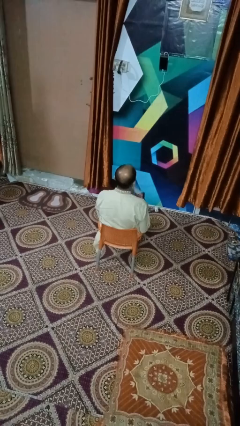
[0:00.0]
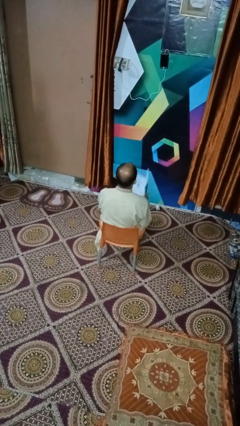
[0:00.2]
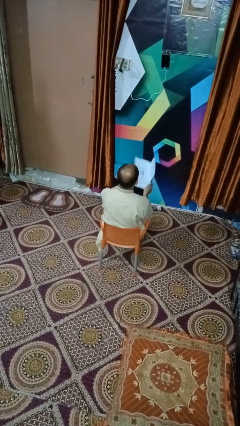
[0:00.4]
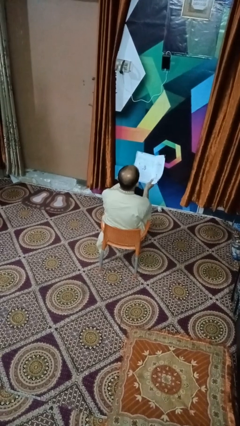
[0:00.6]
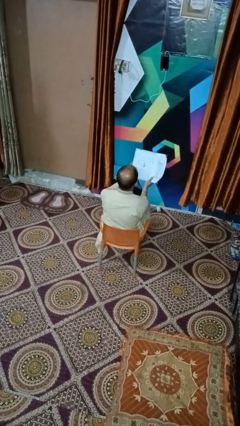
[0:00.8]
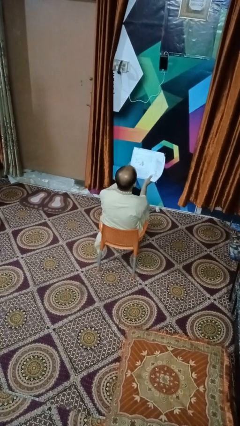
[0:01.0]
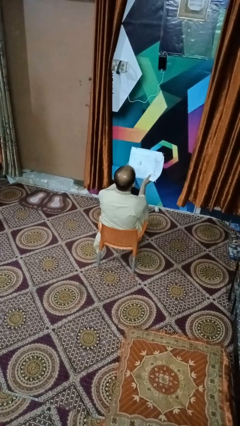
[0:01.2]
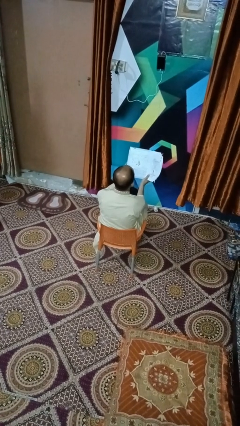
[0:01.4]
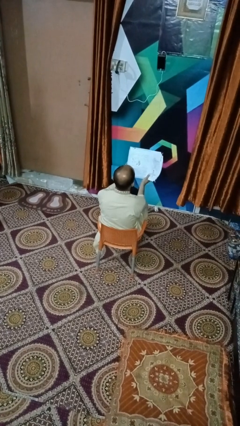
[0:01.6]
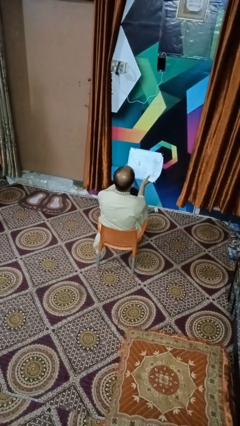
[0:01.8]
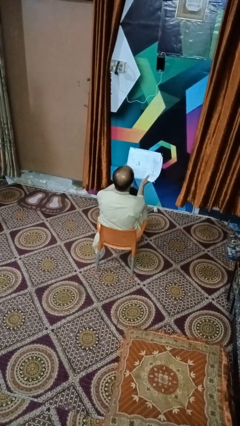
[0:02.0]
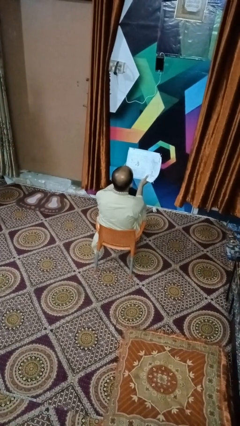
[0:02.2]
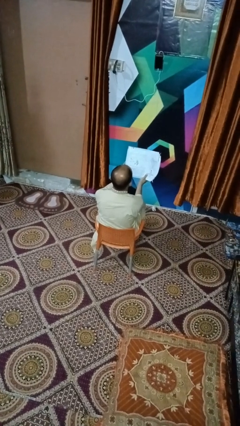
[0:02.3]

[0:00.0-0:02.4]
person reads book

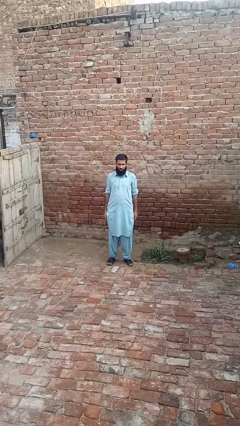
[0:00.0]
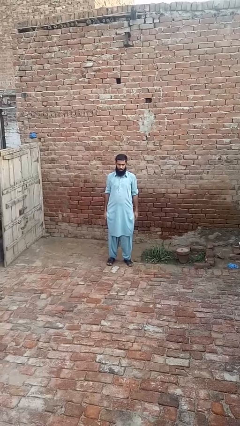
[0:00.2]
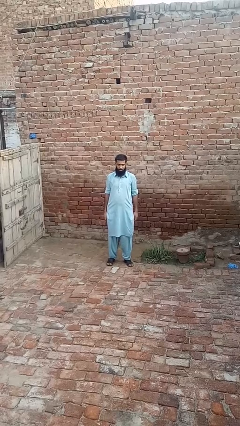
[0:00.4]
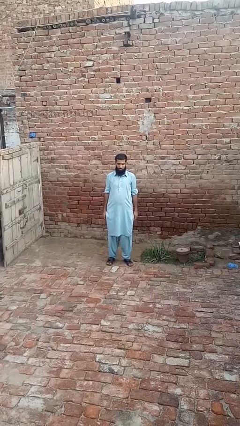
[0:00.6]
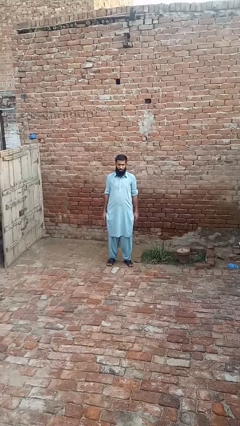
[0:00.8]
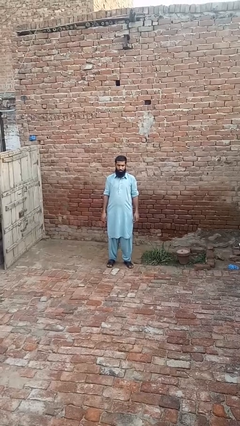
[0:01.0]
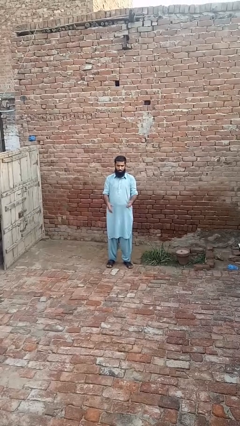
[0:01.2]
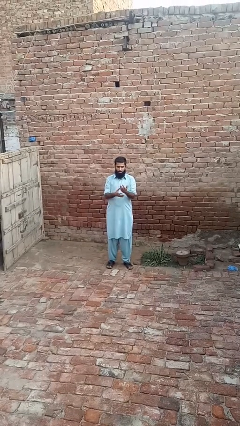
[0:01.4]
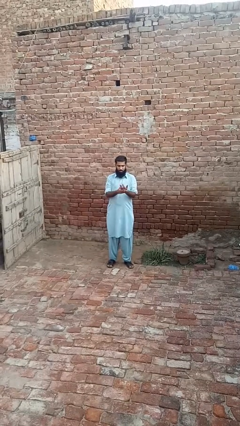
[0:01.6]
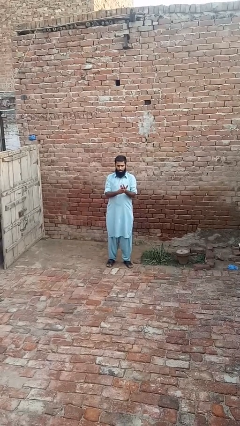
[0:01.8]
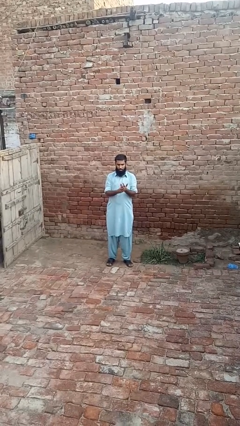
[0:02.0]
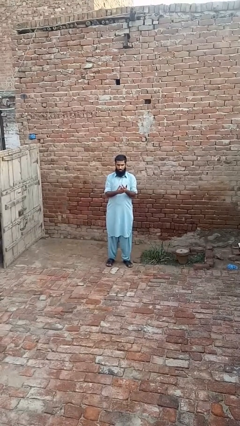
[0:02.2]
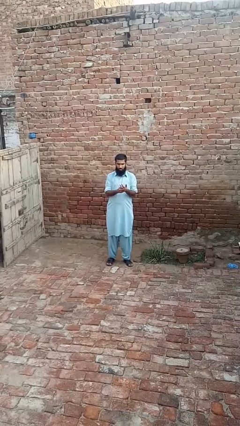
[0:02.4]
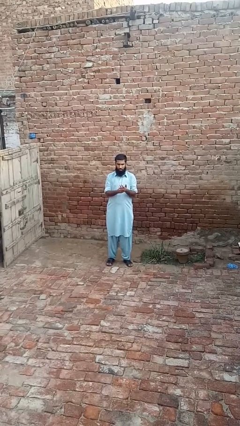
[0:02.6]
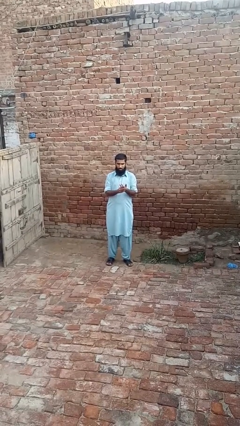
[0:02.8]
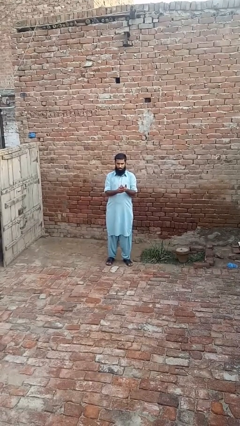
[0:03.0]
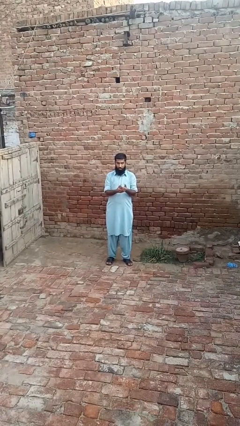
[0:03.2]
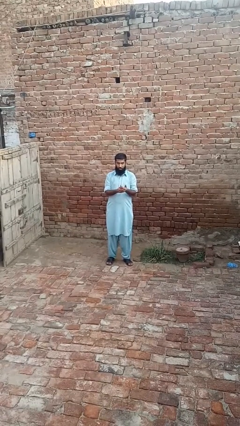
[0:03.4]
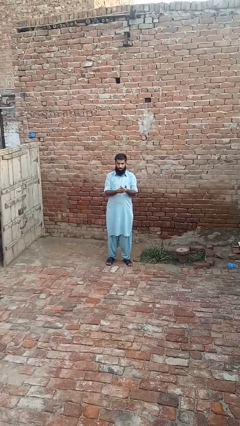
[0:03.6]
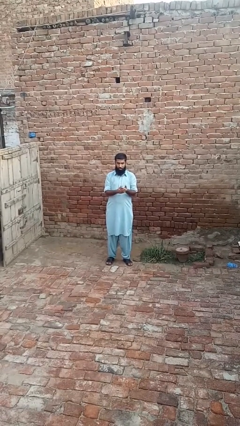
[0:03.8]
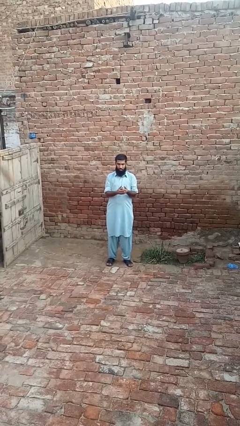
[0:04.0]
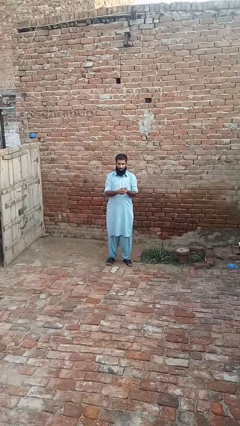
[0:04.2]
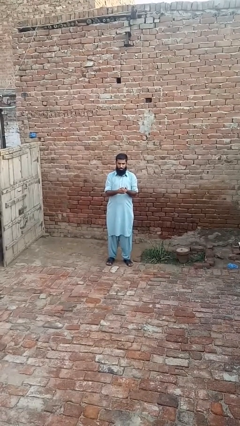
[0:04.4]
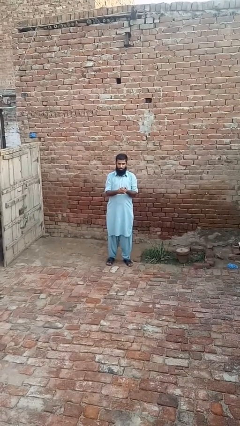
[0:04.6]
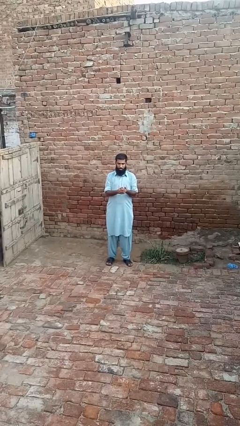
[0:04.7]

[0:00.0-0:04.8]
person cracks knuckles

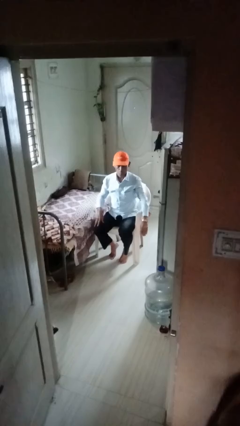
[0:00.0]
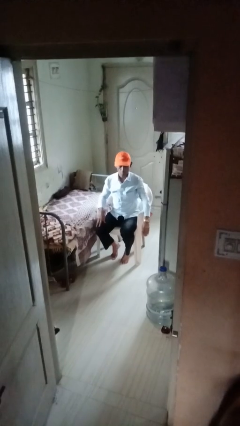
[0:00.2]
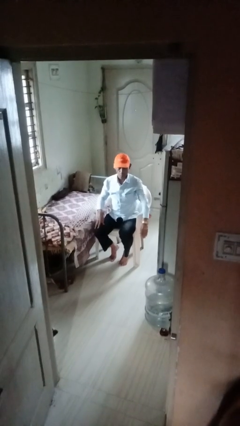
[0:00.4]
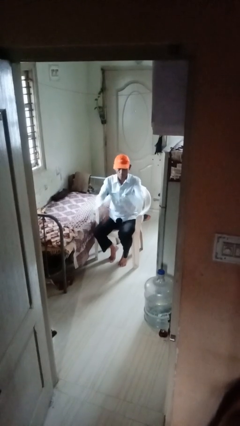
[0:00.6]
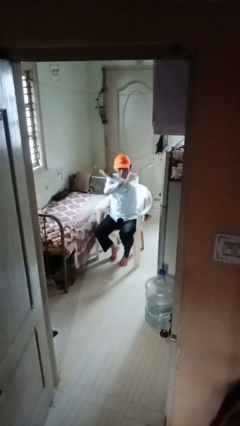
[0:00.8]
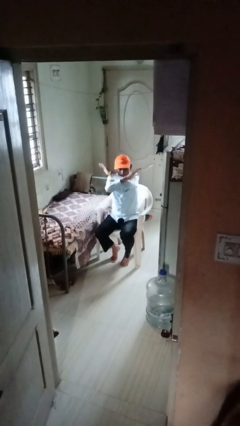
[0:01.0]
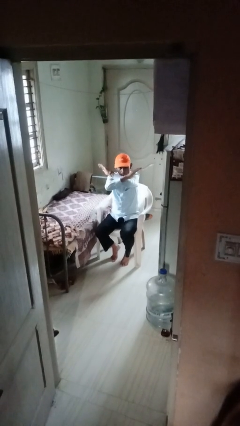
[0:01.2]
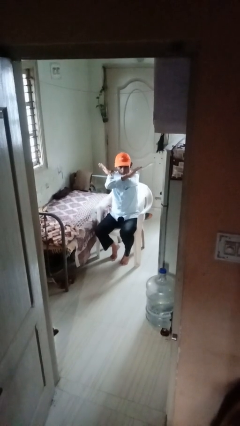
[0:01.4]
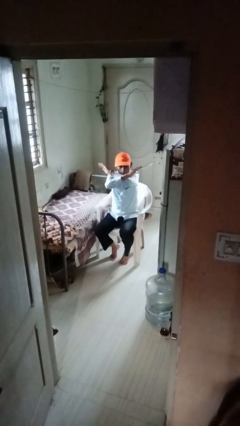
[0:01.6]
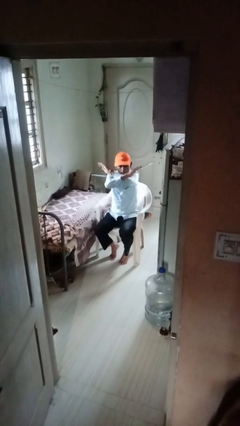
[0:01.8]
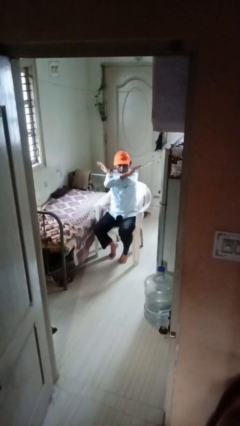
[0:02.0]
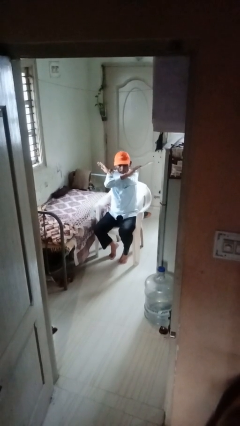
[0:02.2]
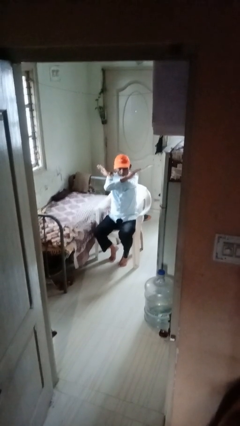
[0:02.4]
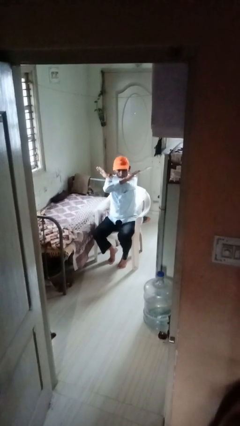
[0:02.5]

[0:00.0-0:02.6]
person gestures arms x

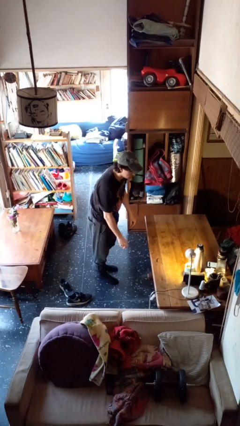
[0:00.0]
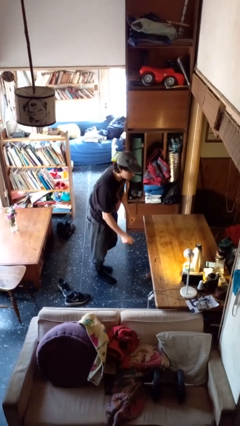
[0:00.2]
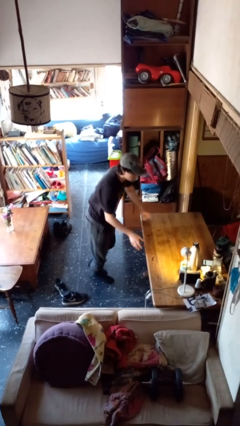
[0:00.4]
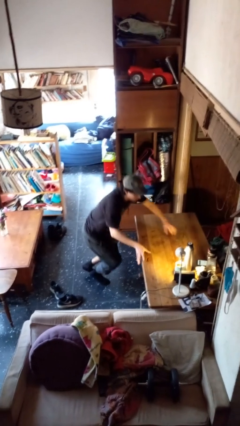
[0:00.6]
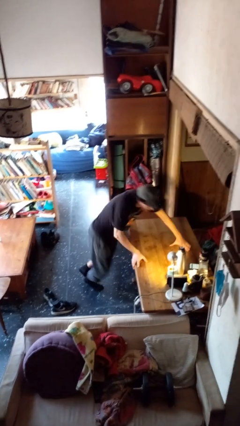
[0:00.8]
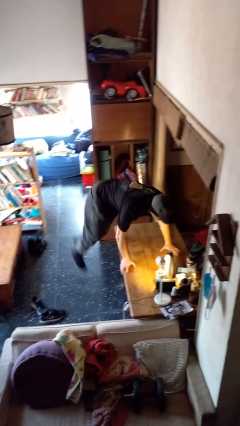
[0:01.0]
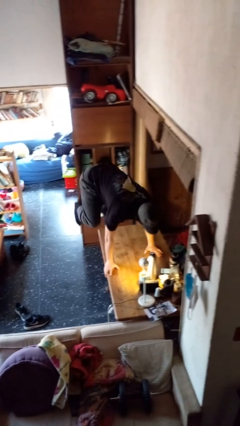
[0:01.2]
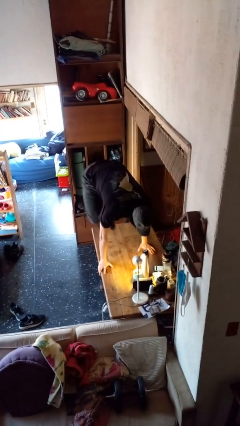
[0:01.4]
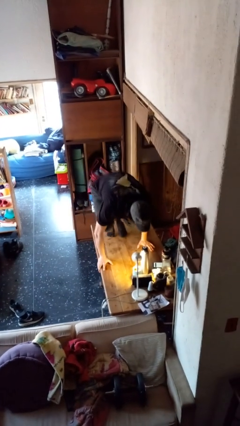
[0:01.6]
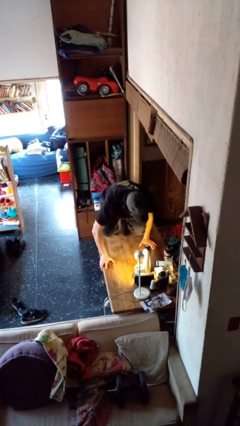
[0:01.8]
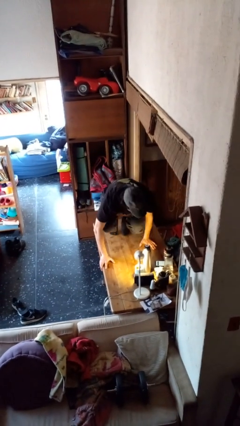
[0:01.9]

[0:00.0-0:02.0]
person climbs on table

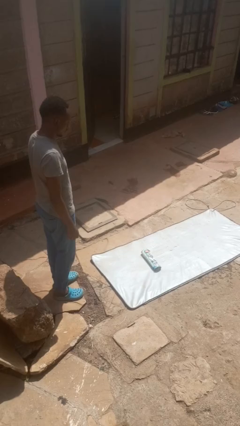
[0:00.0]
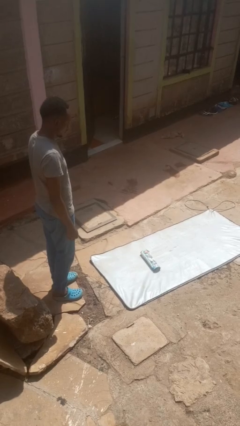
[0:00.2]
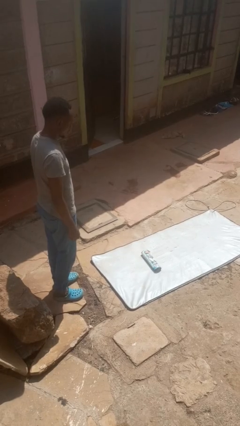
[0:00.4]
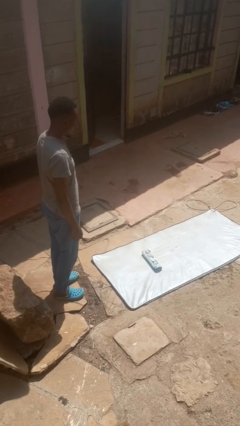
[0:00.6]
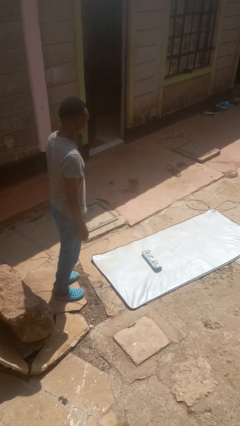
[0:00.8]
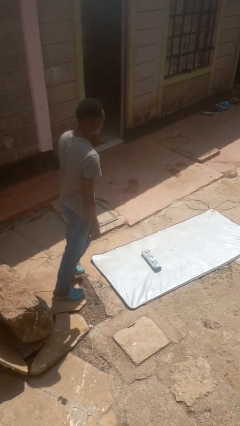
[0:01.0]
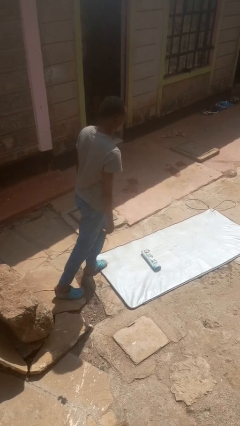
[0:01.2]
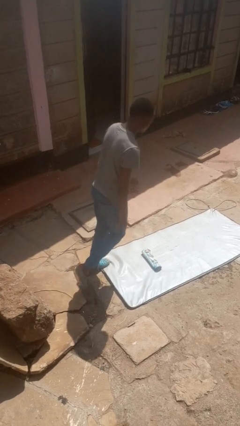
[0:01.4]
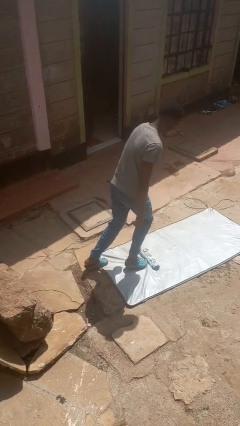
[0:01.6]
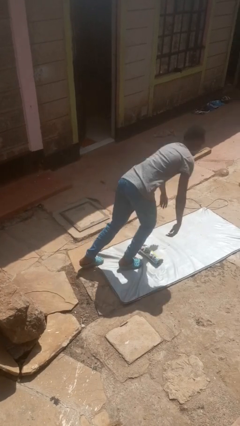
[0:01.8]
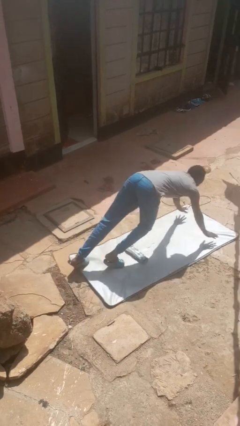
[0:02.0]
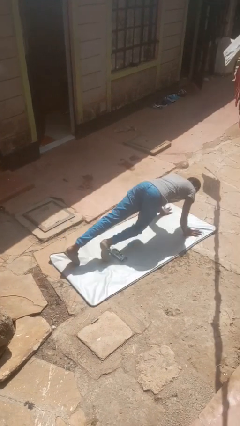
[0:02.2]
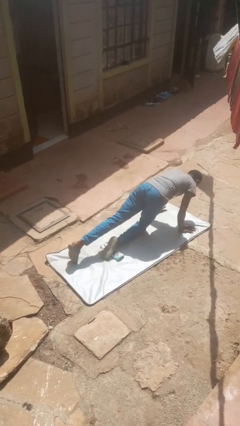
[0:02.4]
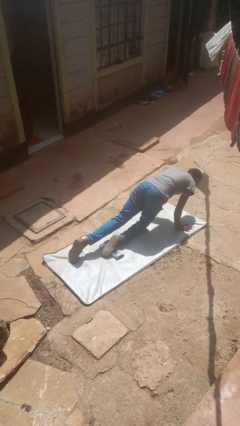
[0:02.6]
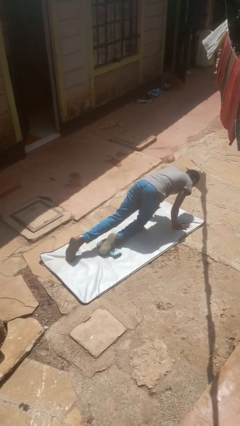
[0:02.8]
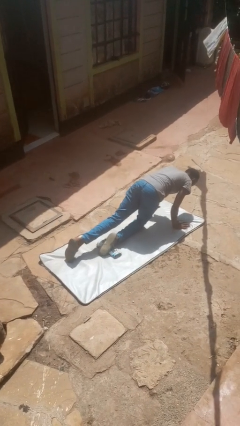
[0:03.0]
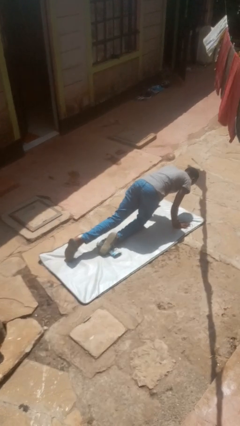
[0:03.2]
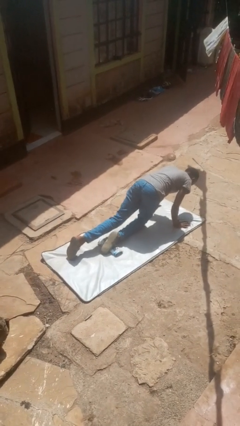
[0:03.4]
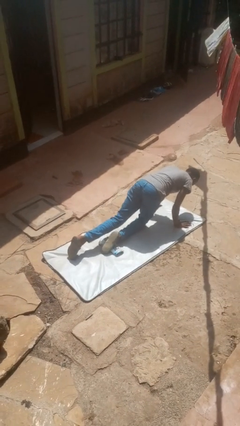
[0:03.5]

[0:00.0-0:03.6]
person trips on object on floor

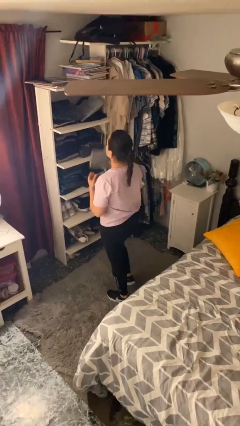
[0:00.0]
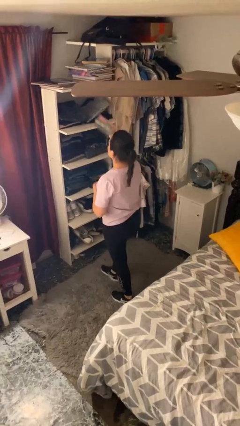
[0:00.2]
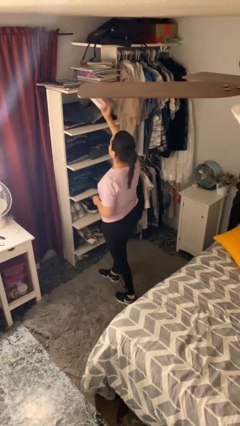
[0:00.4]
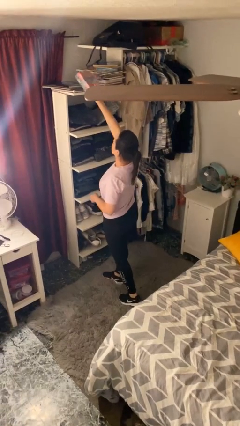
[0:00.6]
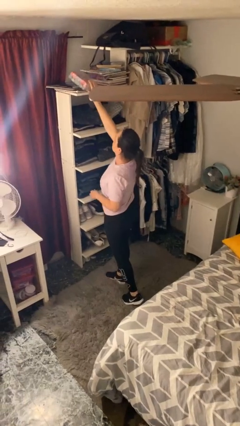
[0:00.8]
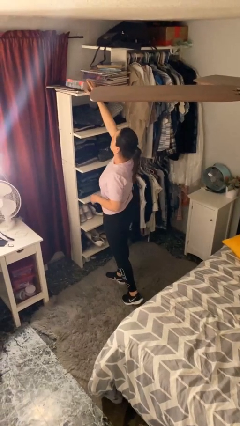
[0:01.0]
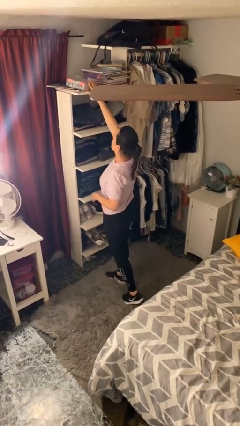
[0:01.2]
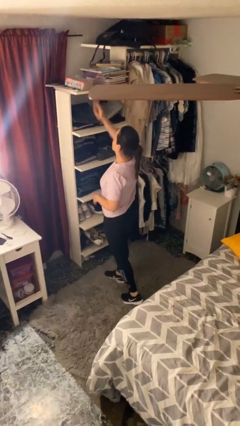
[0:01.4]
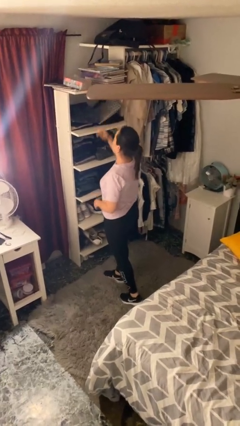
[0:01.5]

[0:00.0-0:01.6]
person puts down object on shelf
